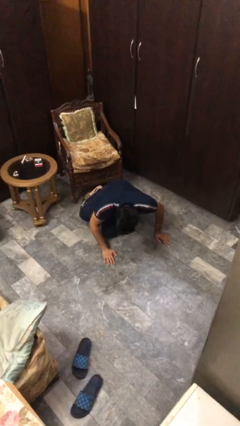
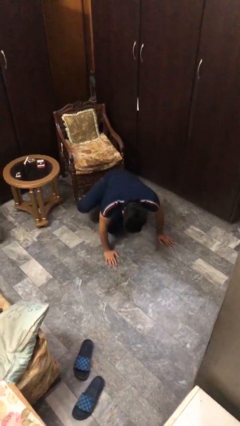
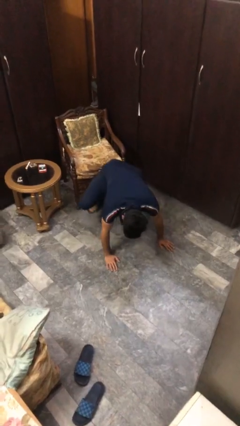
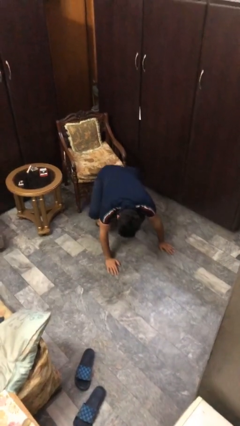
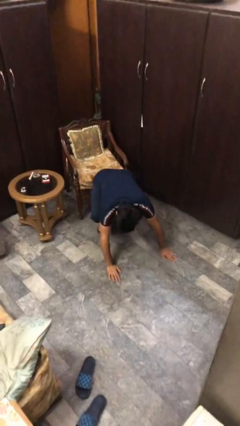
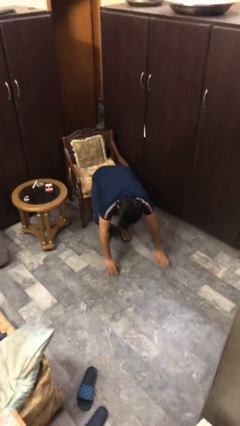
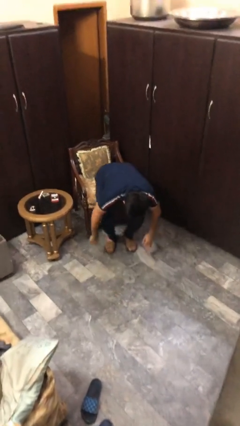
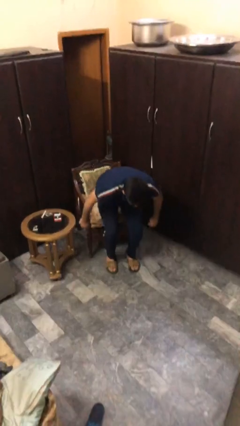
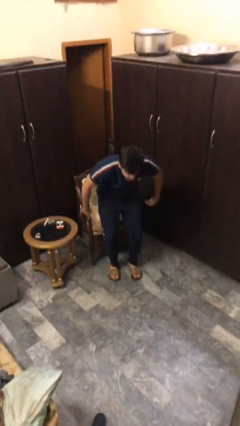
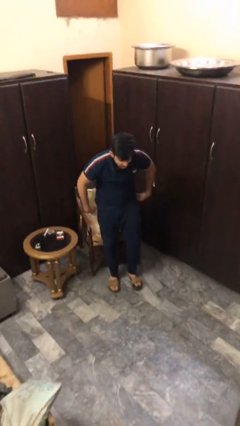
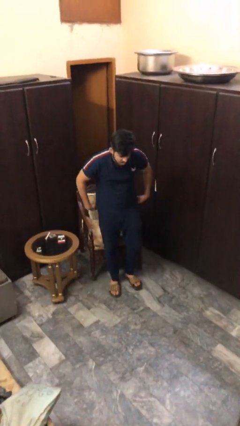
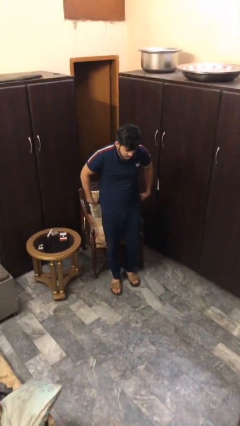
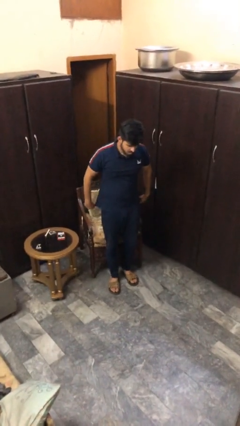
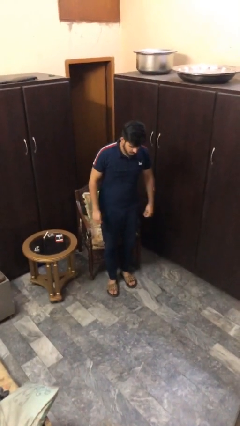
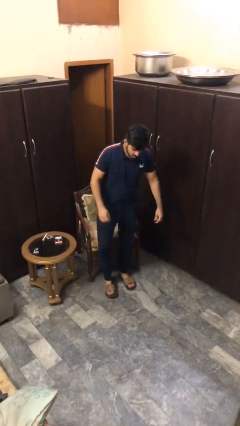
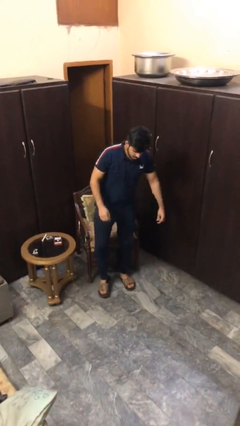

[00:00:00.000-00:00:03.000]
person stands up from floor

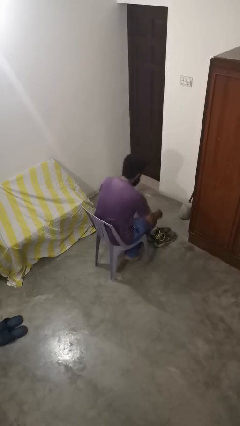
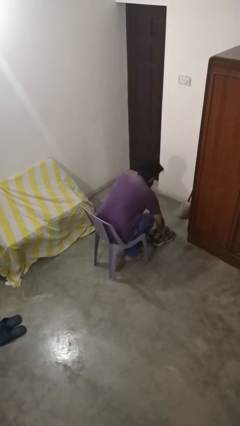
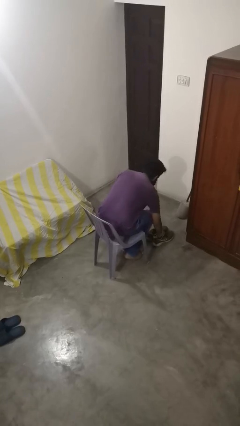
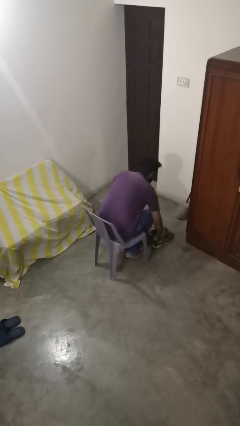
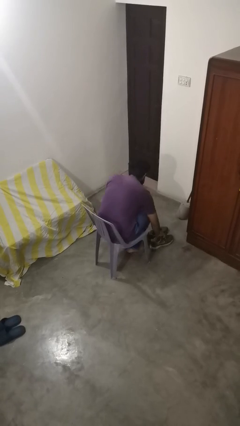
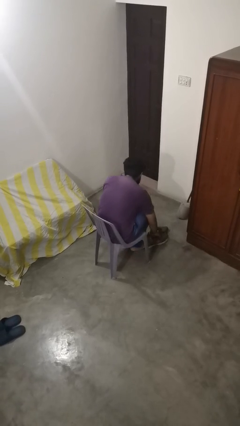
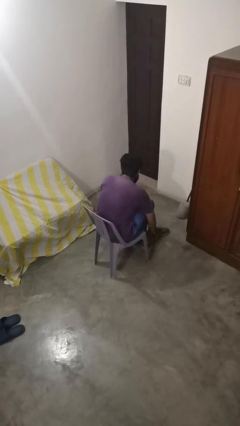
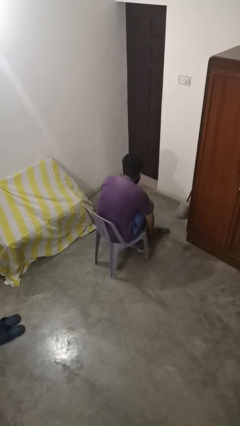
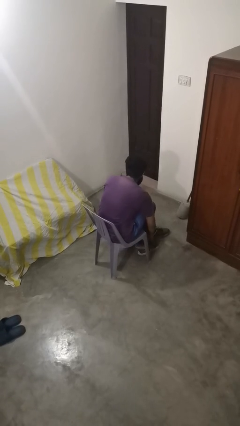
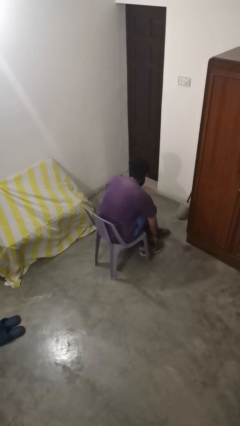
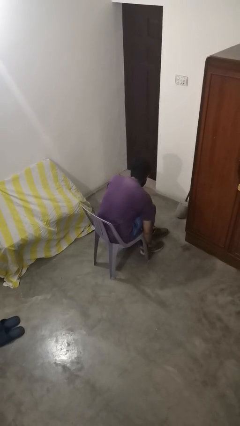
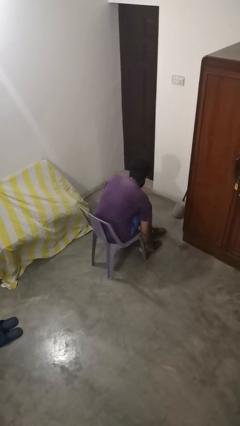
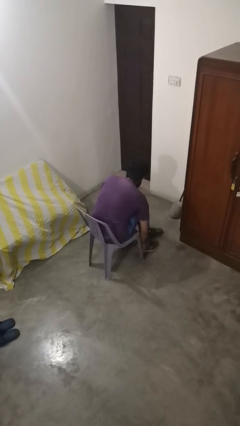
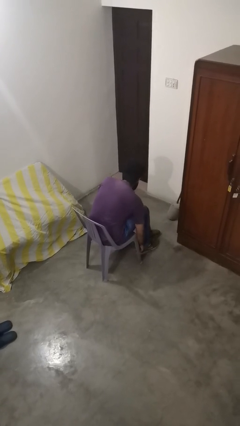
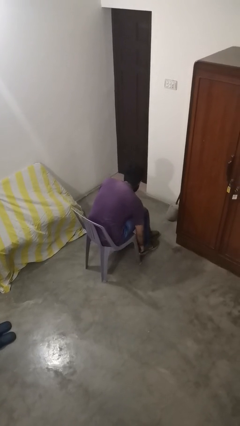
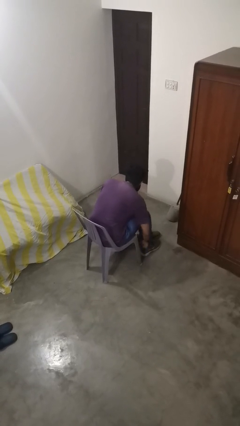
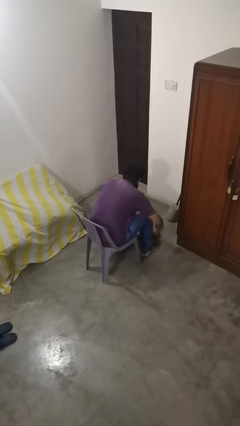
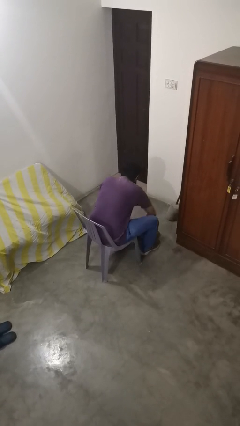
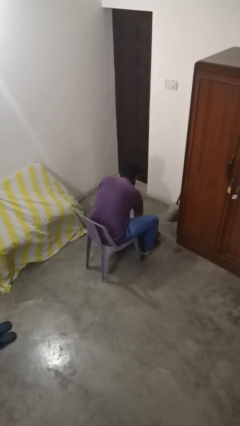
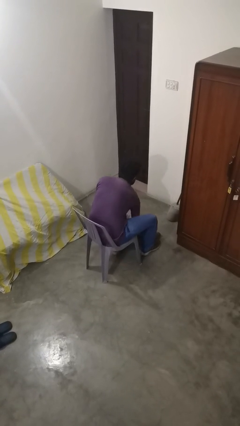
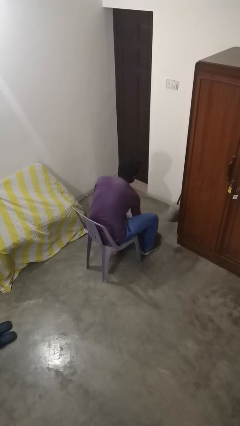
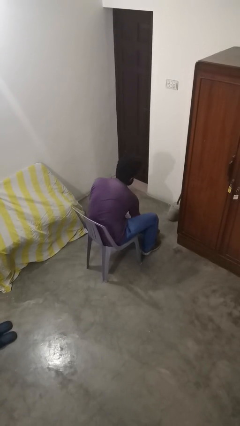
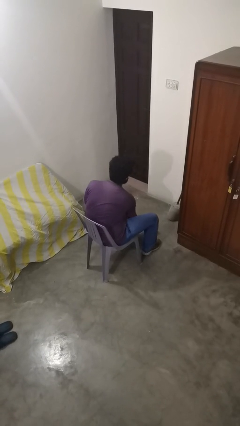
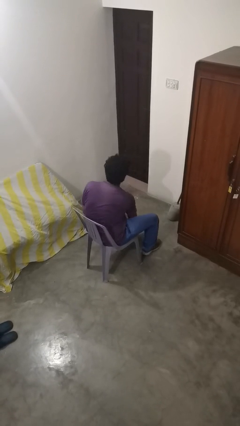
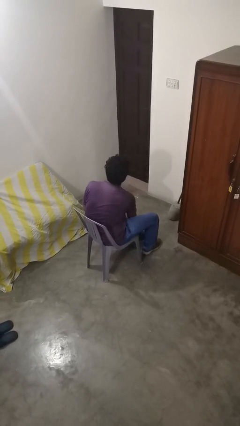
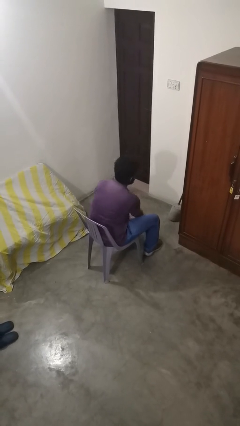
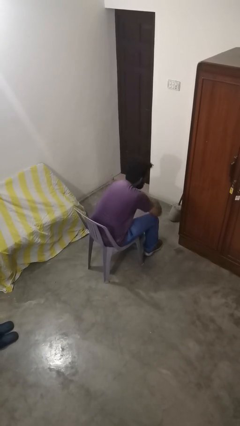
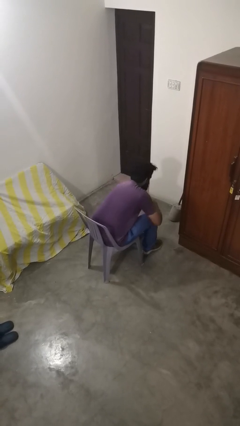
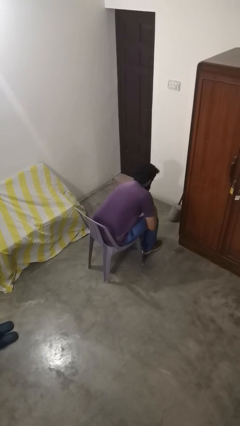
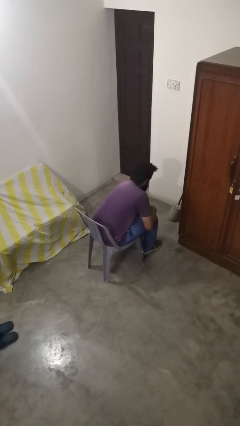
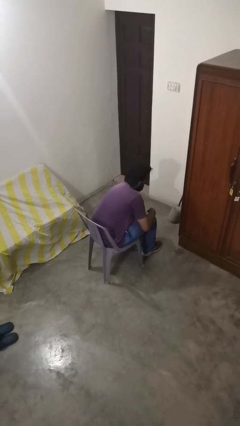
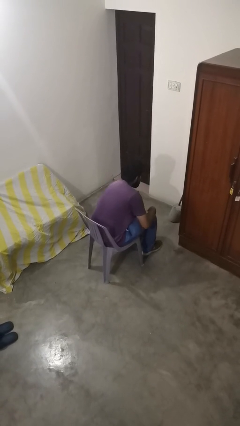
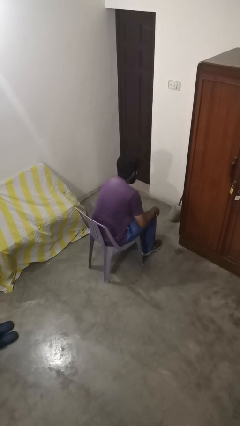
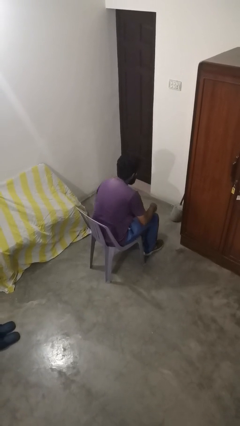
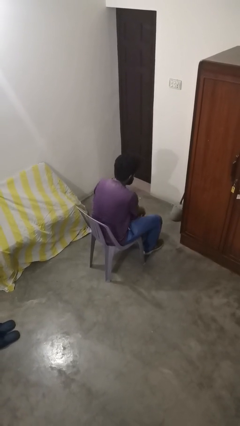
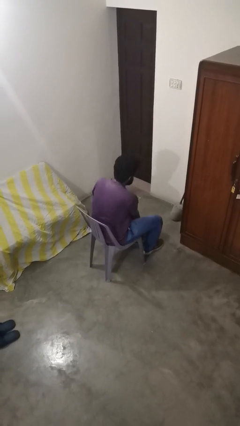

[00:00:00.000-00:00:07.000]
person puts on shoes

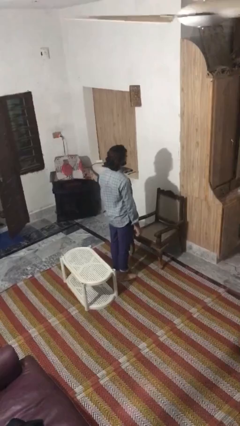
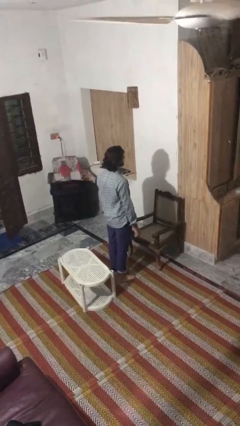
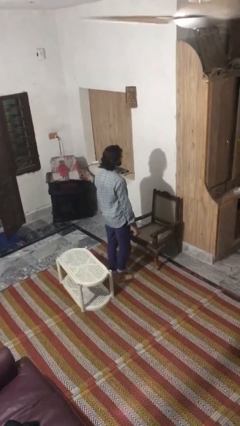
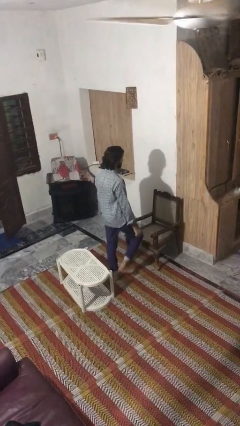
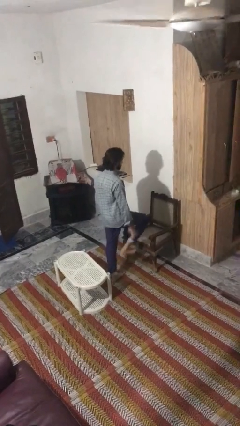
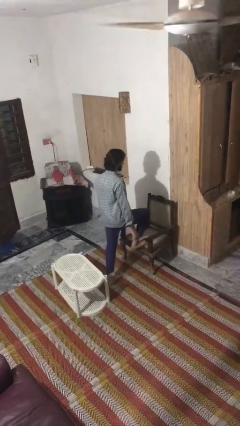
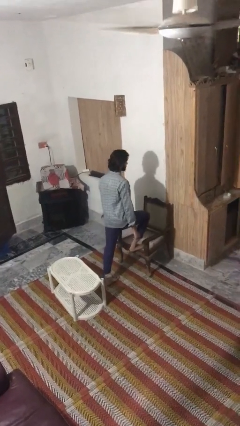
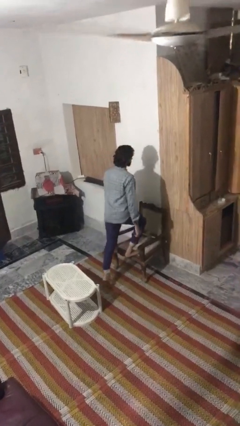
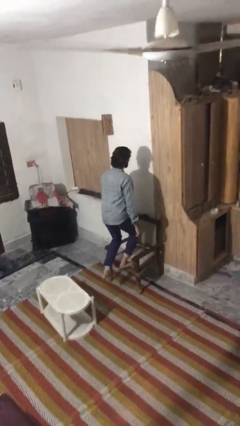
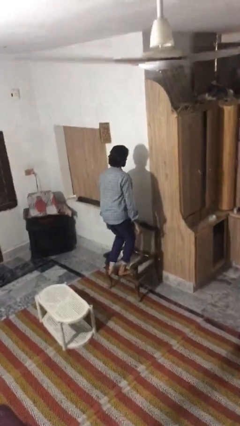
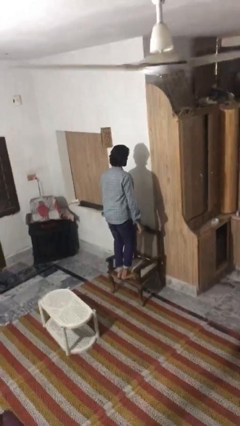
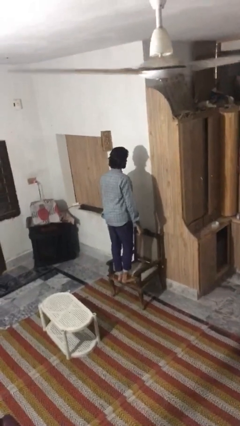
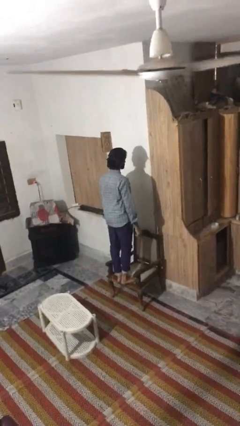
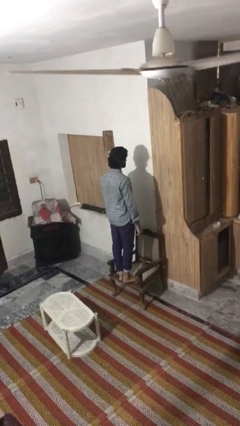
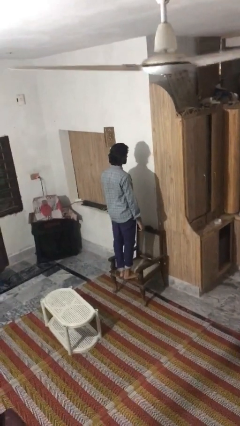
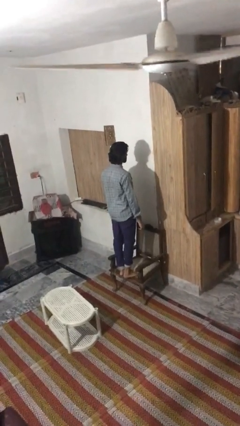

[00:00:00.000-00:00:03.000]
person climbs on chair

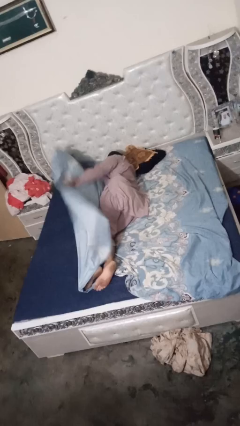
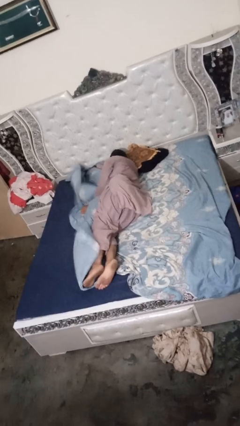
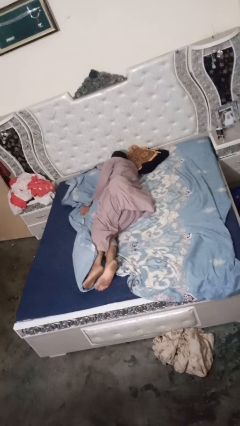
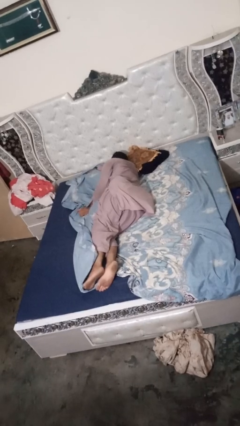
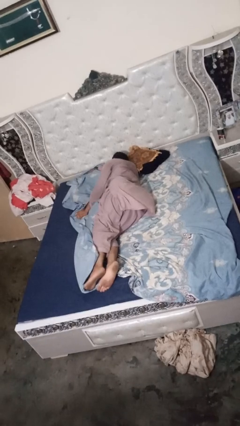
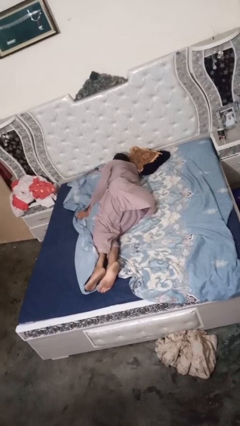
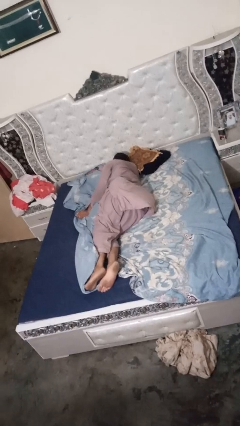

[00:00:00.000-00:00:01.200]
person uncovers with bedsheets

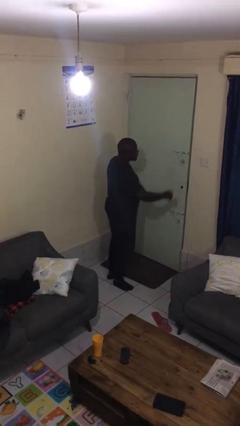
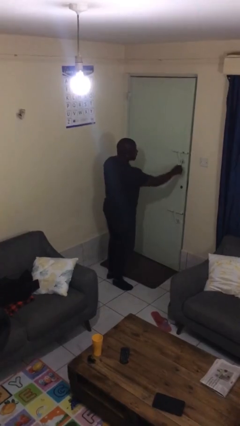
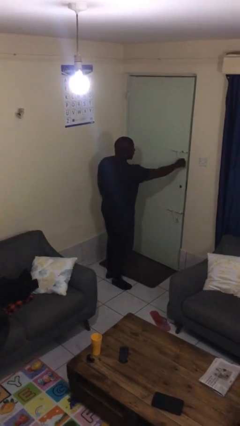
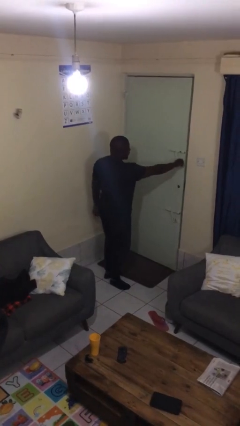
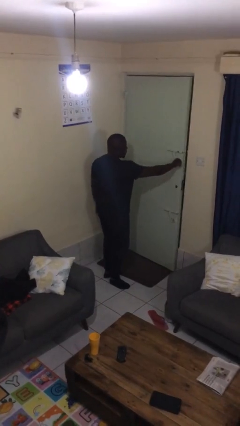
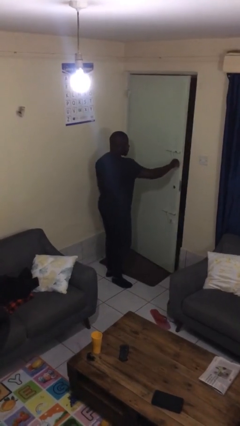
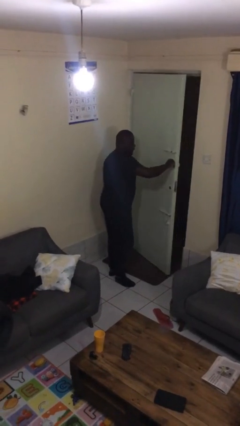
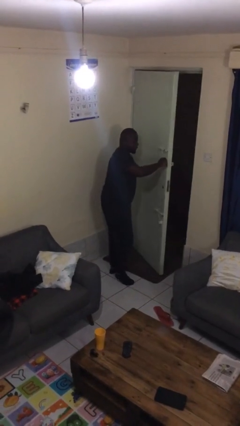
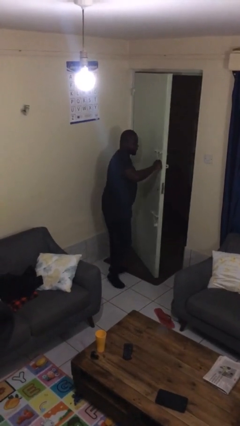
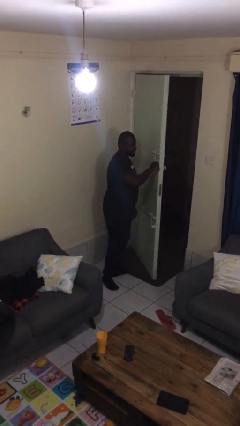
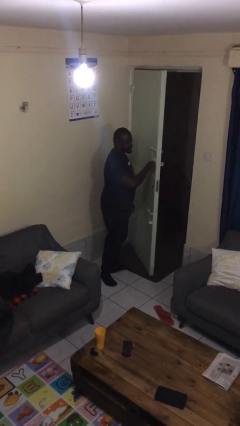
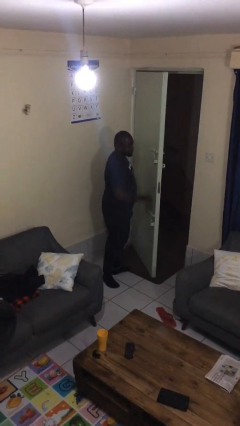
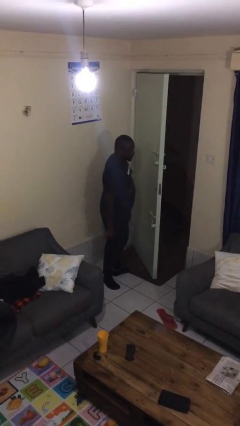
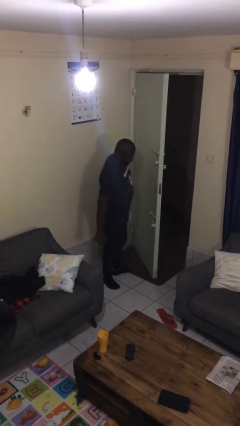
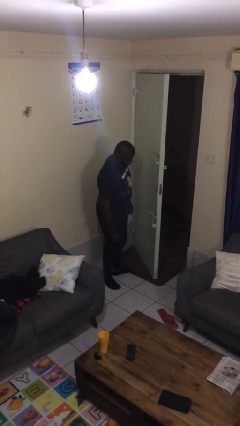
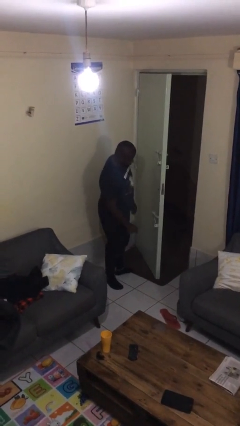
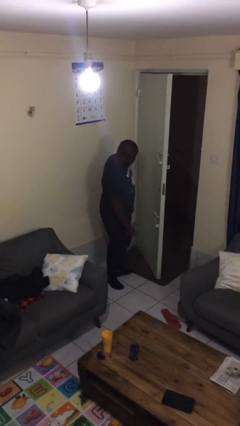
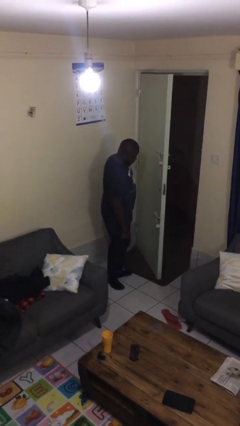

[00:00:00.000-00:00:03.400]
person opens facility door
